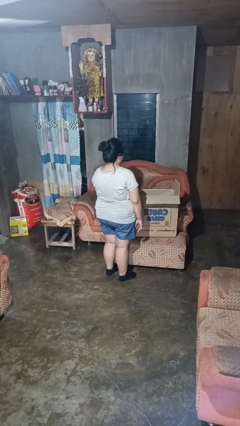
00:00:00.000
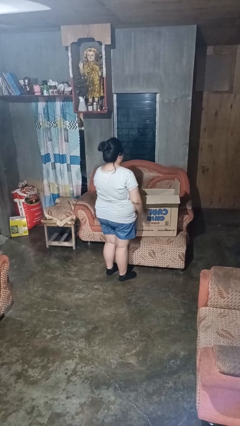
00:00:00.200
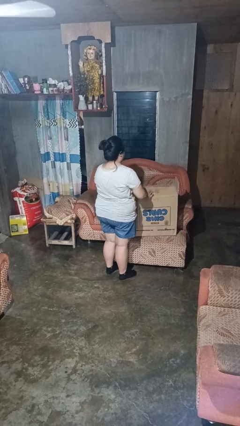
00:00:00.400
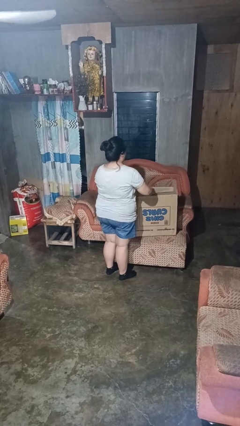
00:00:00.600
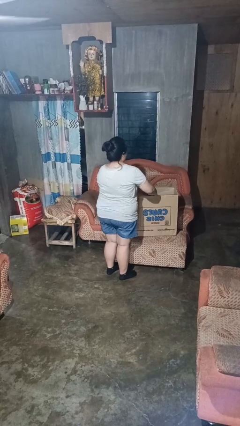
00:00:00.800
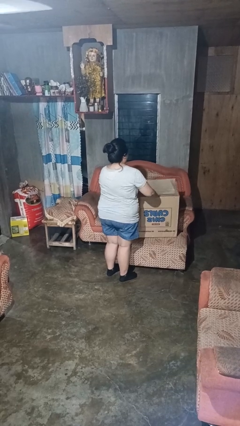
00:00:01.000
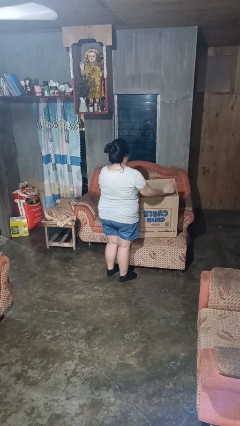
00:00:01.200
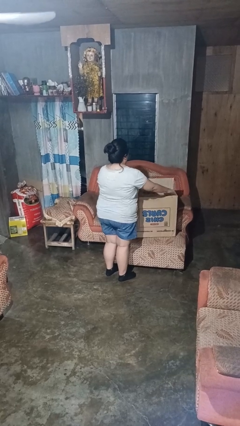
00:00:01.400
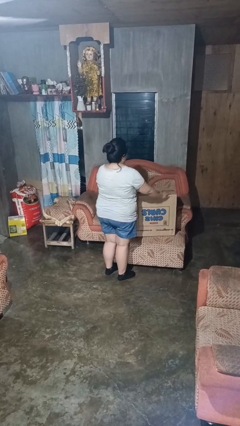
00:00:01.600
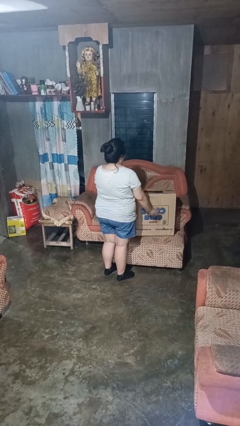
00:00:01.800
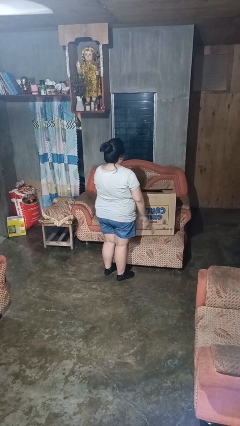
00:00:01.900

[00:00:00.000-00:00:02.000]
person closes box

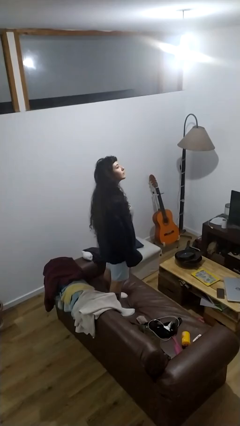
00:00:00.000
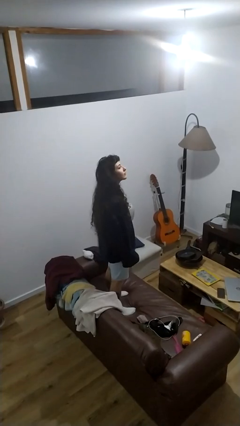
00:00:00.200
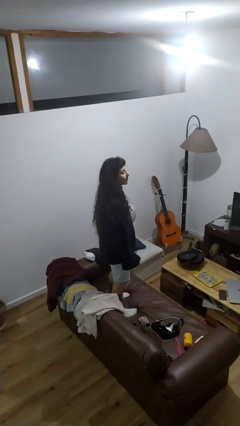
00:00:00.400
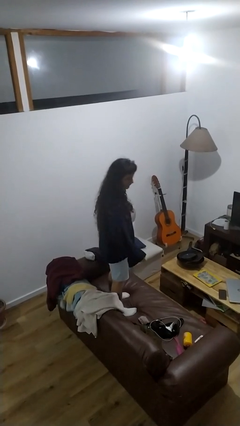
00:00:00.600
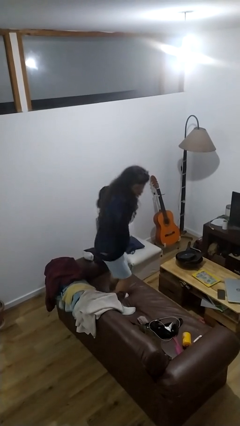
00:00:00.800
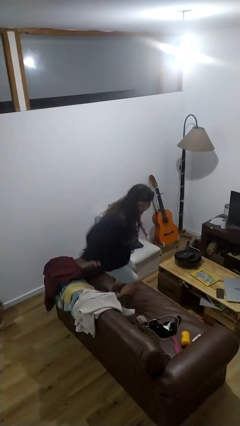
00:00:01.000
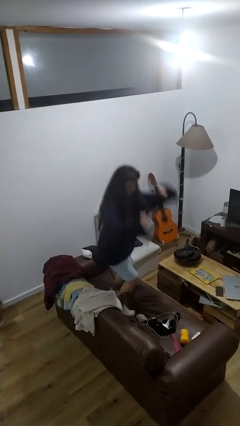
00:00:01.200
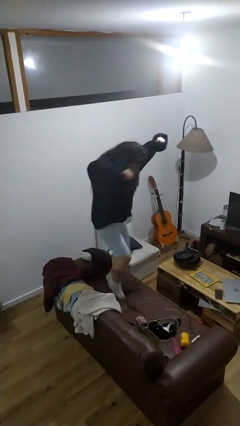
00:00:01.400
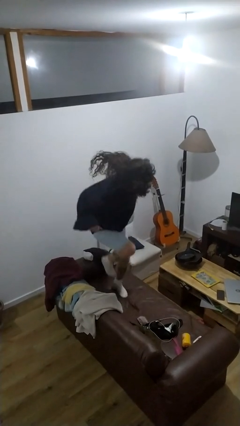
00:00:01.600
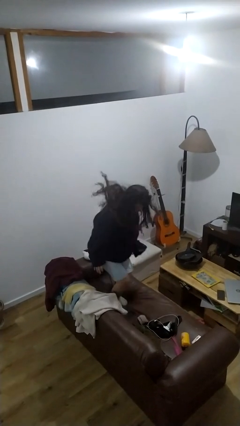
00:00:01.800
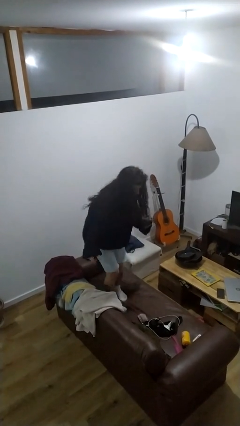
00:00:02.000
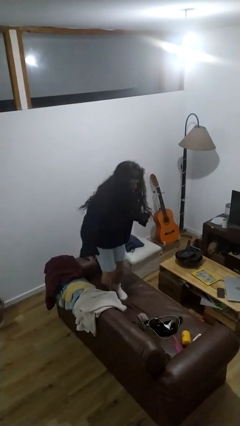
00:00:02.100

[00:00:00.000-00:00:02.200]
person jumps on couch

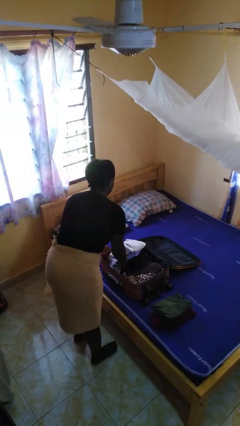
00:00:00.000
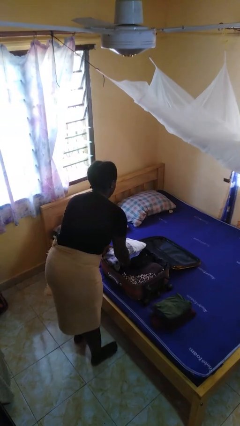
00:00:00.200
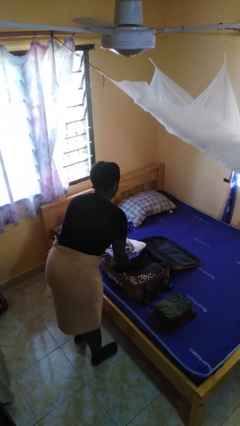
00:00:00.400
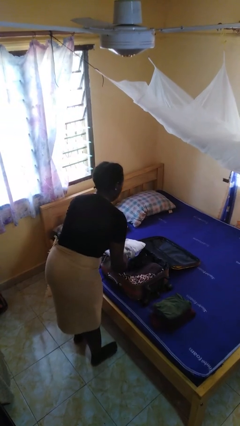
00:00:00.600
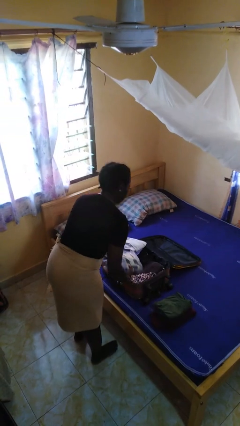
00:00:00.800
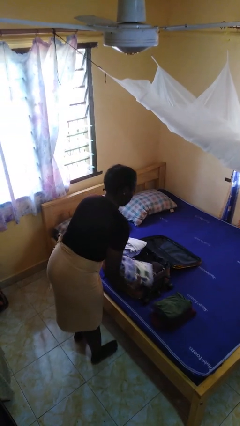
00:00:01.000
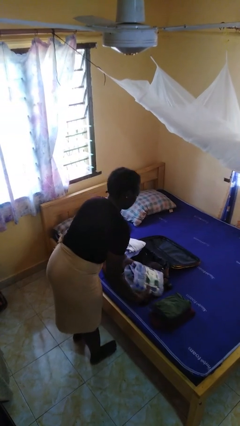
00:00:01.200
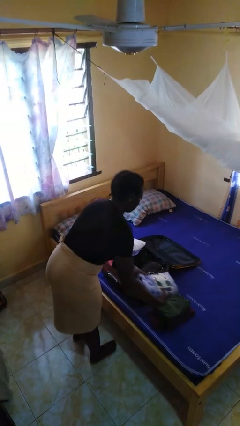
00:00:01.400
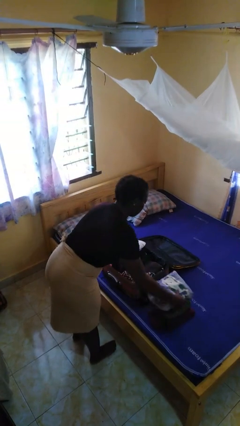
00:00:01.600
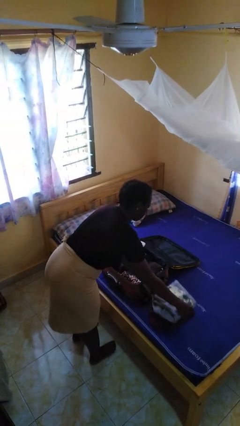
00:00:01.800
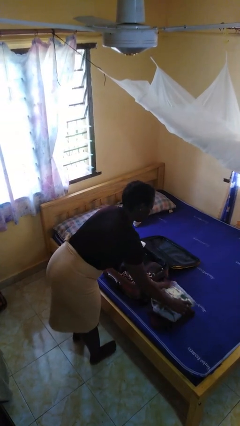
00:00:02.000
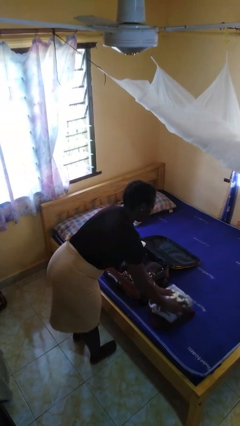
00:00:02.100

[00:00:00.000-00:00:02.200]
person unloads clothes from suitcase

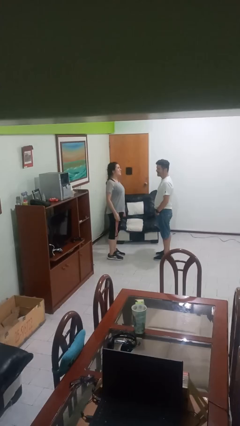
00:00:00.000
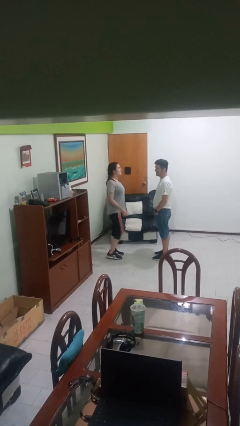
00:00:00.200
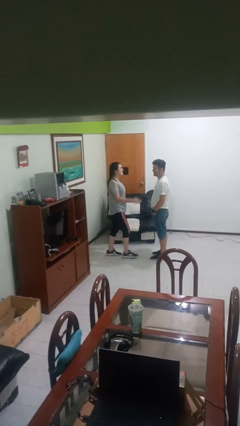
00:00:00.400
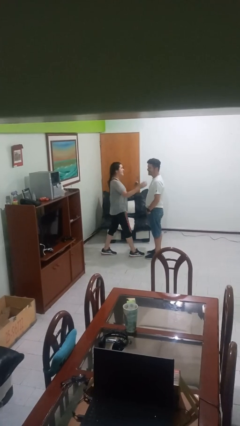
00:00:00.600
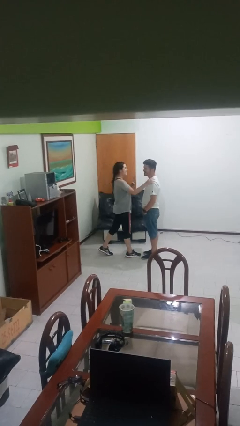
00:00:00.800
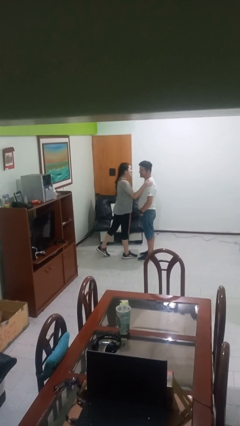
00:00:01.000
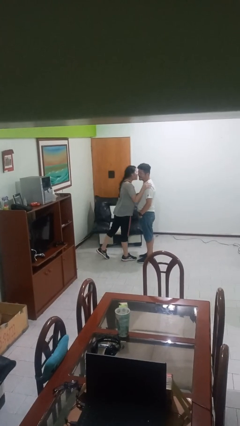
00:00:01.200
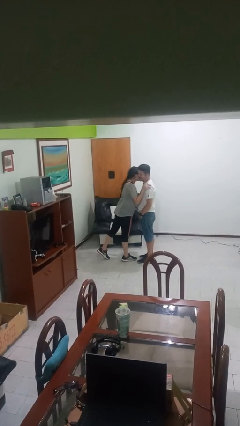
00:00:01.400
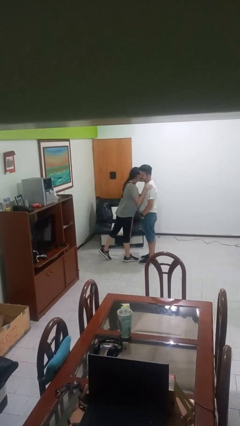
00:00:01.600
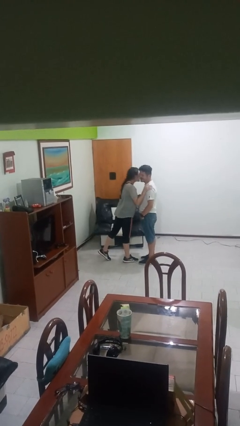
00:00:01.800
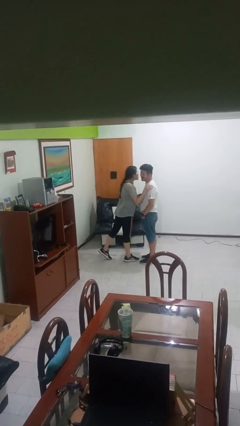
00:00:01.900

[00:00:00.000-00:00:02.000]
person kisses cheek of person

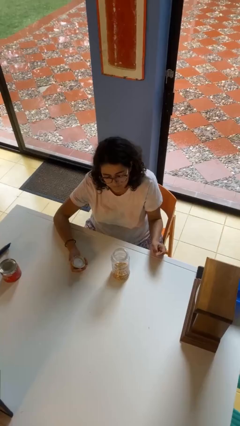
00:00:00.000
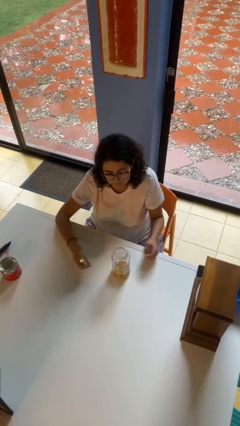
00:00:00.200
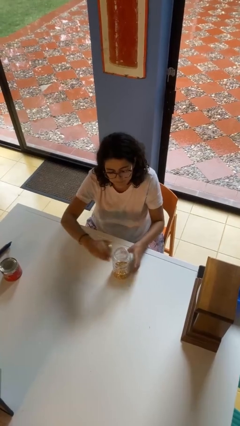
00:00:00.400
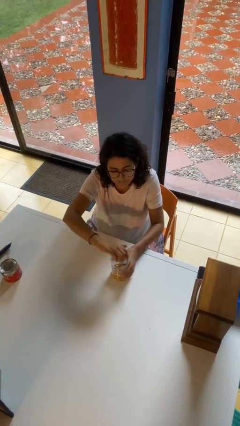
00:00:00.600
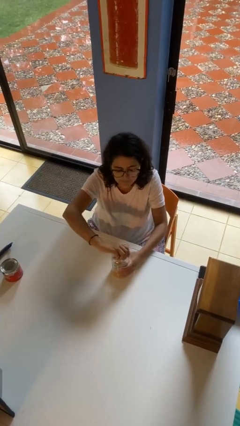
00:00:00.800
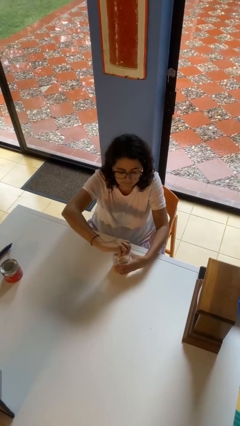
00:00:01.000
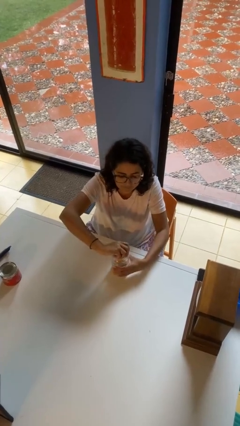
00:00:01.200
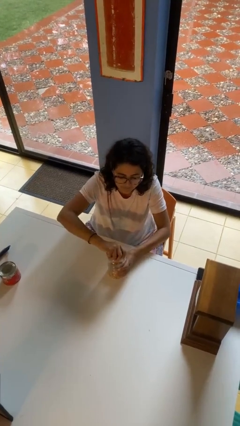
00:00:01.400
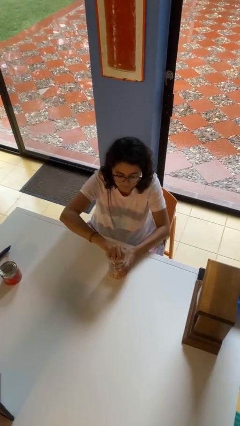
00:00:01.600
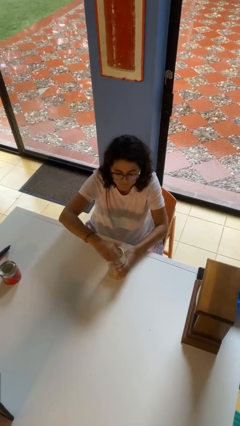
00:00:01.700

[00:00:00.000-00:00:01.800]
person closes jar

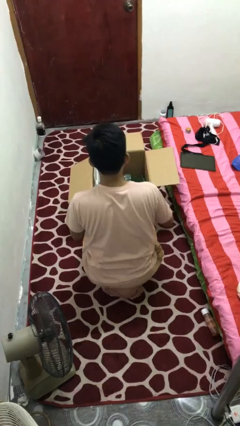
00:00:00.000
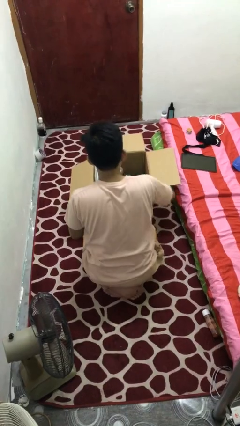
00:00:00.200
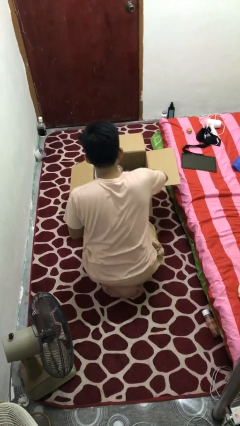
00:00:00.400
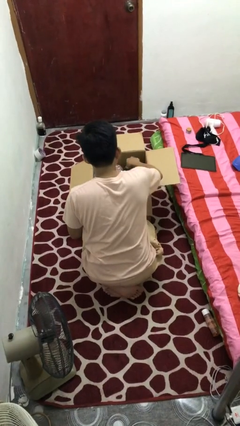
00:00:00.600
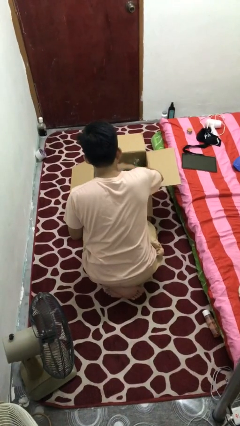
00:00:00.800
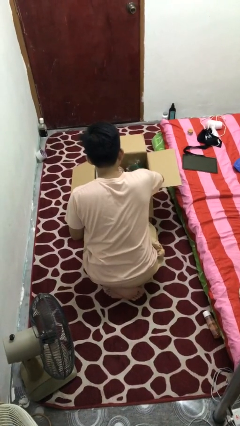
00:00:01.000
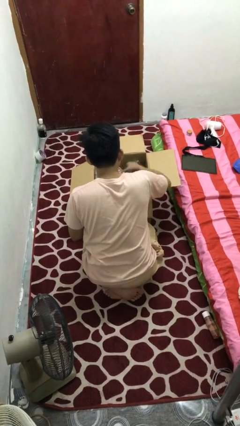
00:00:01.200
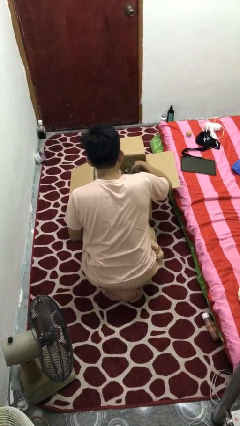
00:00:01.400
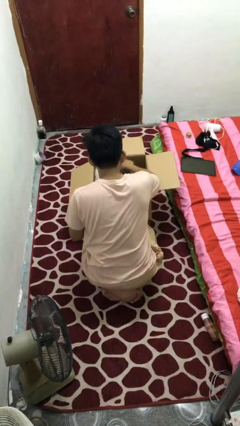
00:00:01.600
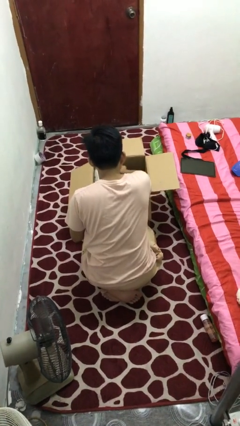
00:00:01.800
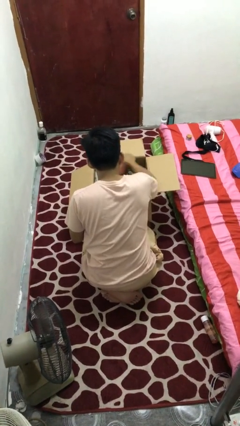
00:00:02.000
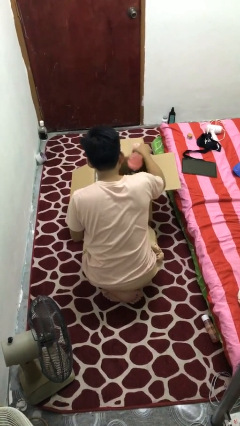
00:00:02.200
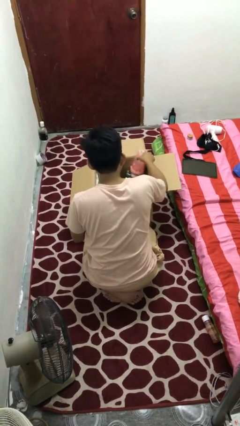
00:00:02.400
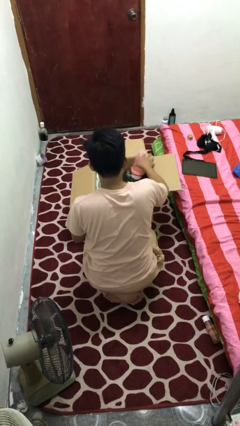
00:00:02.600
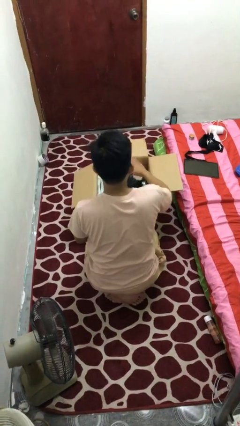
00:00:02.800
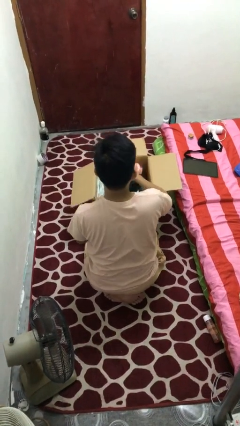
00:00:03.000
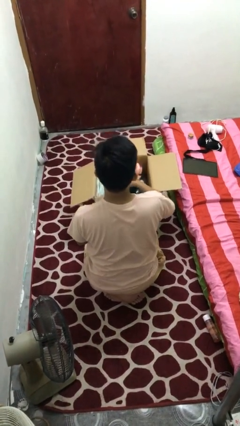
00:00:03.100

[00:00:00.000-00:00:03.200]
person searches in box

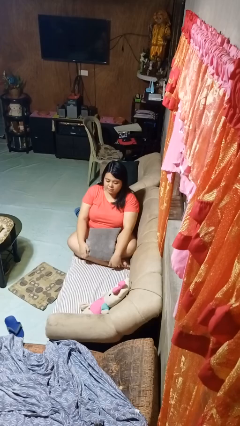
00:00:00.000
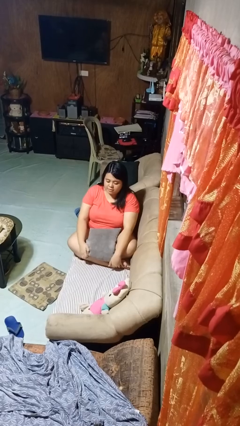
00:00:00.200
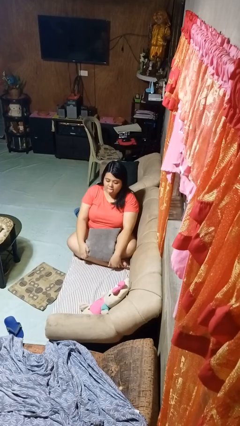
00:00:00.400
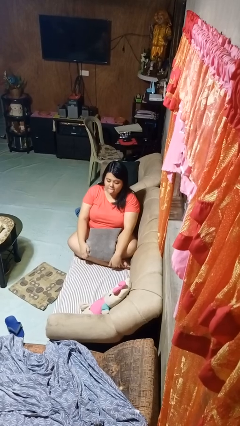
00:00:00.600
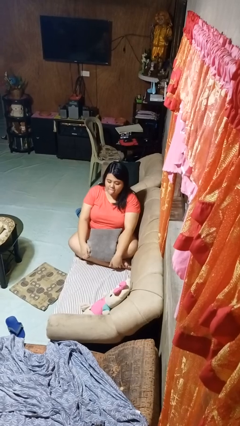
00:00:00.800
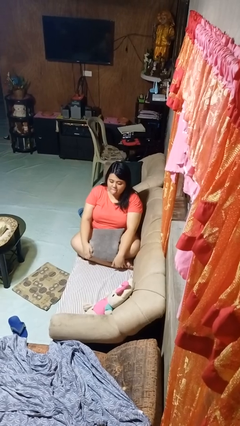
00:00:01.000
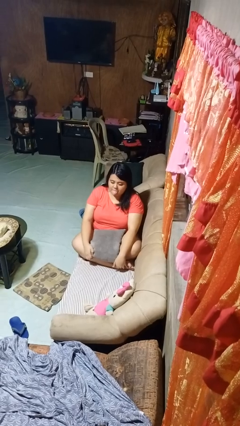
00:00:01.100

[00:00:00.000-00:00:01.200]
person sticks out tongue

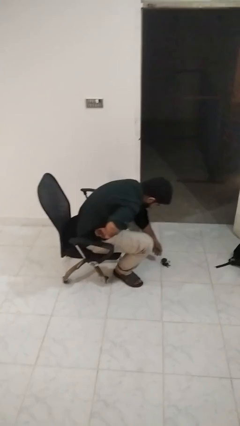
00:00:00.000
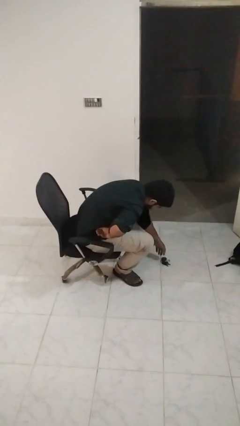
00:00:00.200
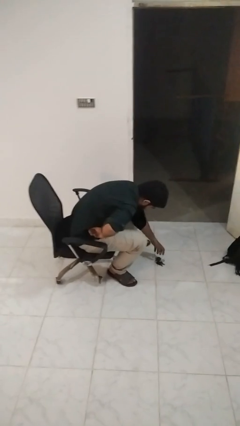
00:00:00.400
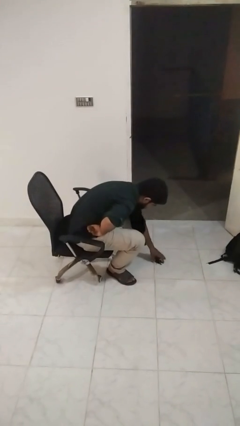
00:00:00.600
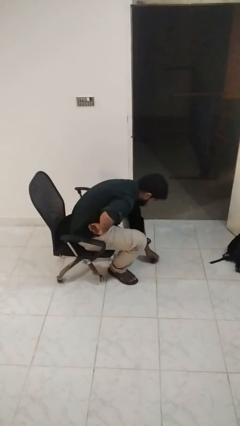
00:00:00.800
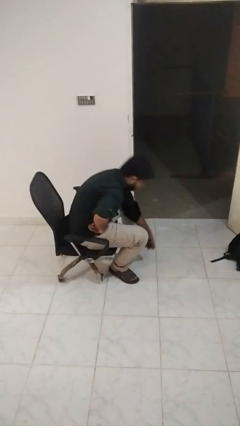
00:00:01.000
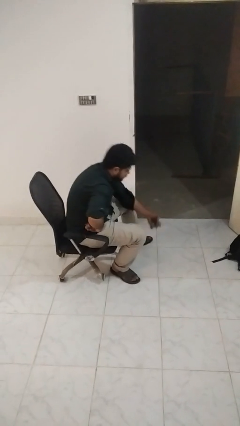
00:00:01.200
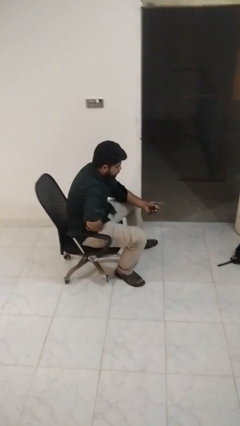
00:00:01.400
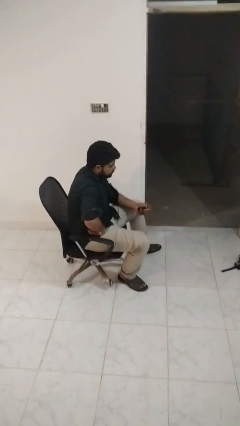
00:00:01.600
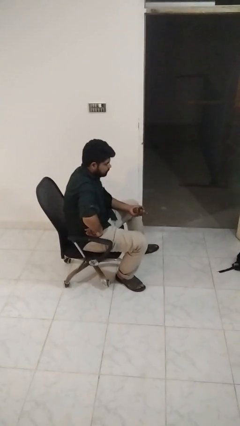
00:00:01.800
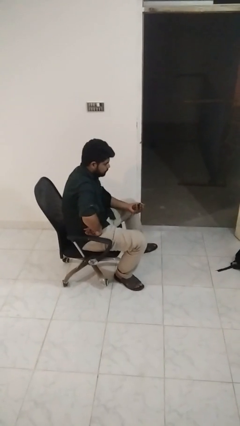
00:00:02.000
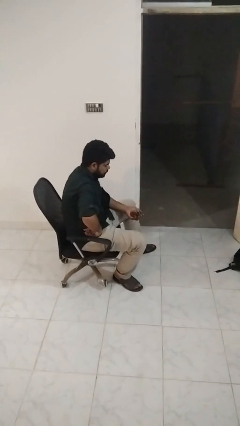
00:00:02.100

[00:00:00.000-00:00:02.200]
person picks up object from floor

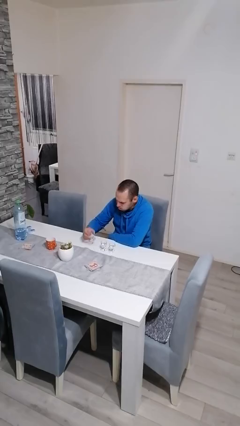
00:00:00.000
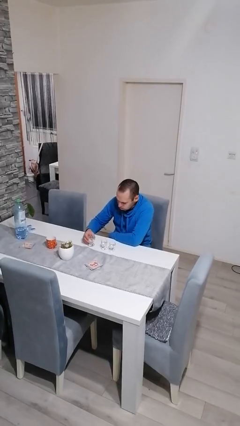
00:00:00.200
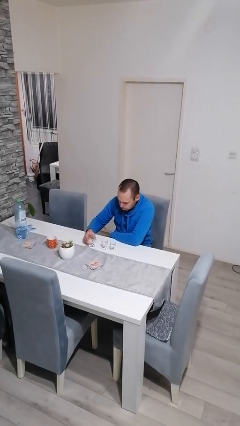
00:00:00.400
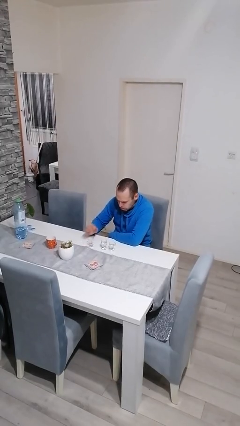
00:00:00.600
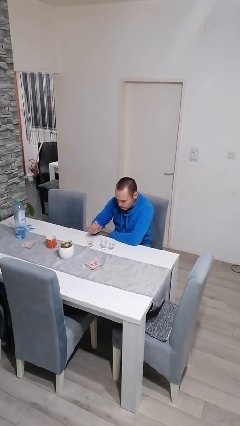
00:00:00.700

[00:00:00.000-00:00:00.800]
person puts down object on table
